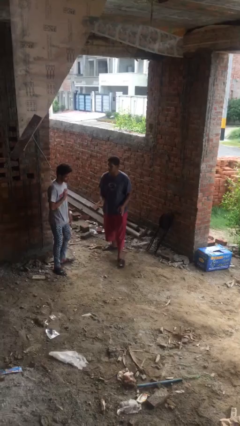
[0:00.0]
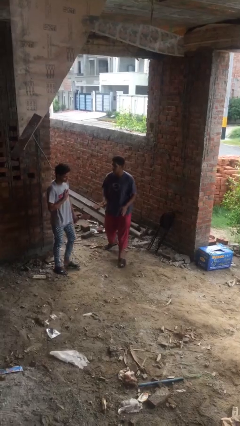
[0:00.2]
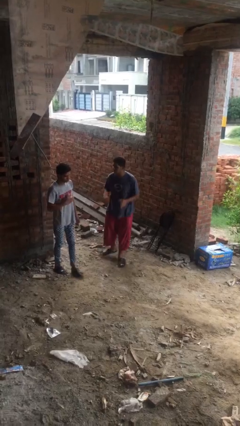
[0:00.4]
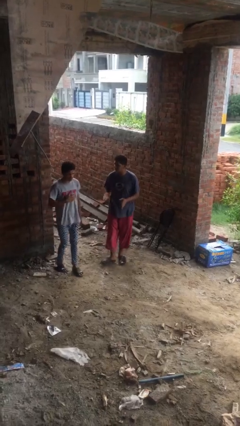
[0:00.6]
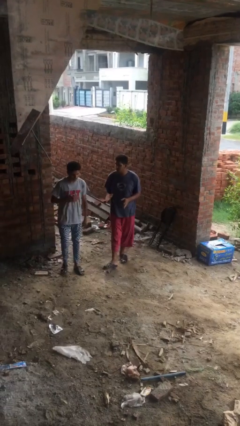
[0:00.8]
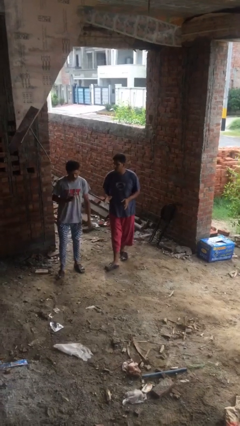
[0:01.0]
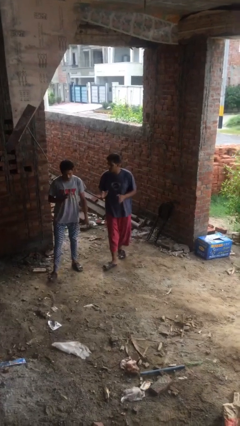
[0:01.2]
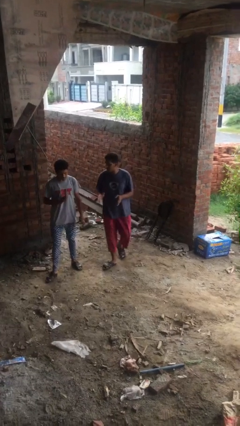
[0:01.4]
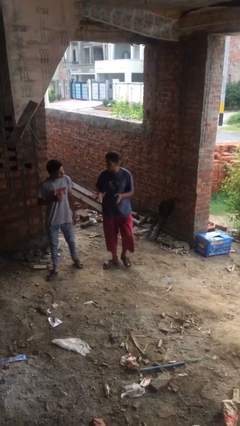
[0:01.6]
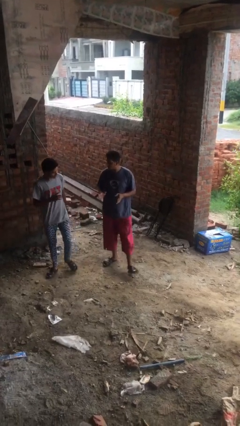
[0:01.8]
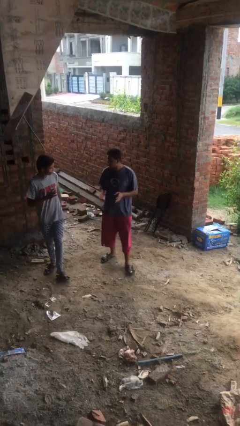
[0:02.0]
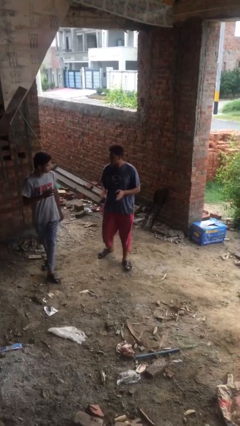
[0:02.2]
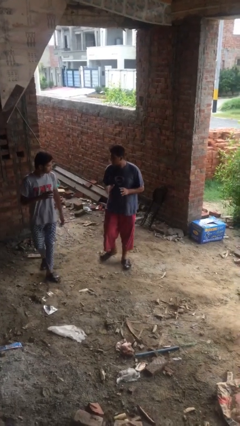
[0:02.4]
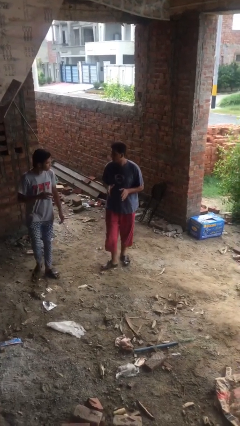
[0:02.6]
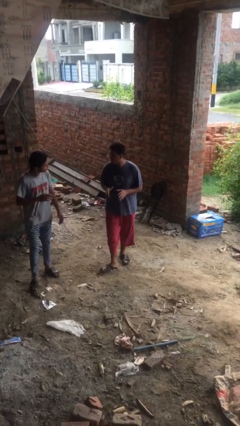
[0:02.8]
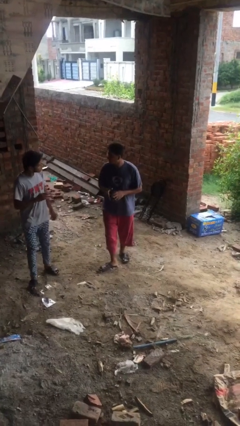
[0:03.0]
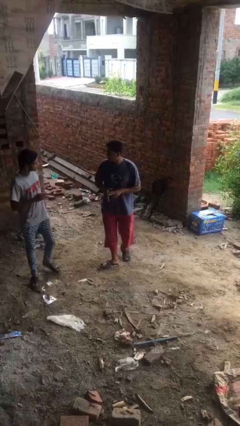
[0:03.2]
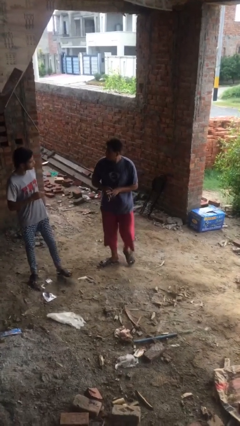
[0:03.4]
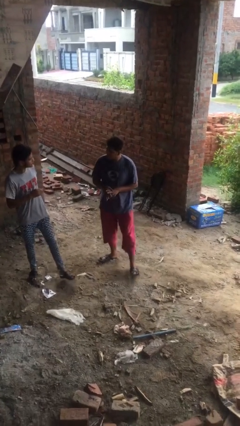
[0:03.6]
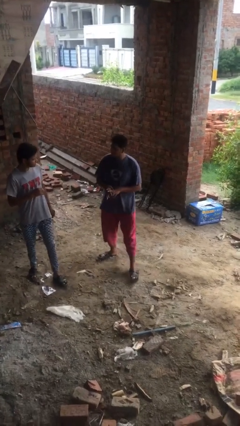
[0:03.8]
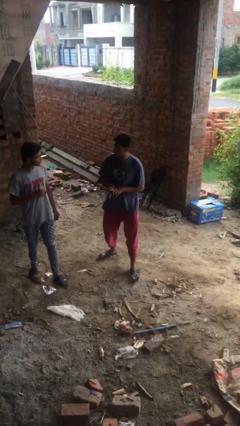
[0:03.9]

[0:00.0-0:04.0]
person talks to person

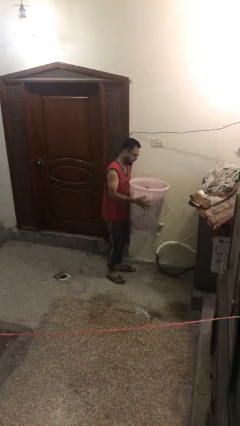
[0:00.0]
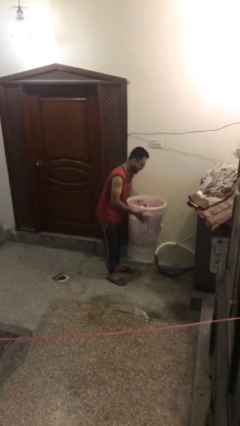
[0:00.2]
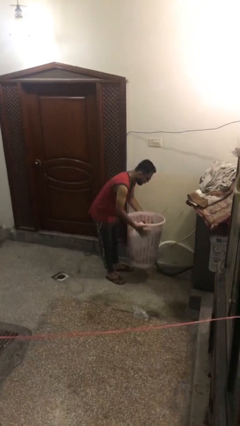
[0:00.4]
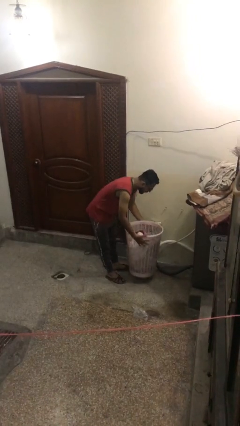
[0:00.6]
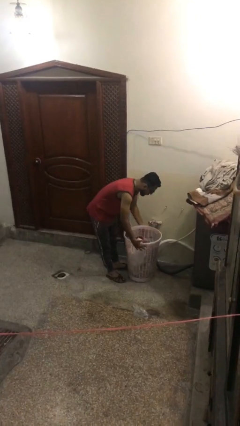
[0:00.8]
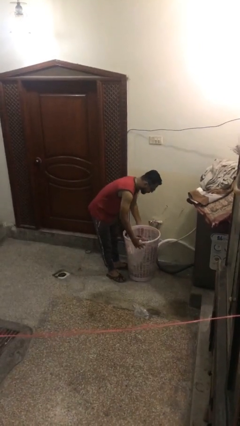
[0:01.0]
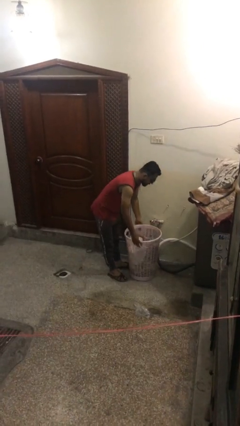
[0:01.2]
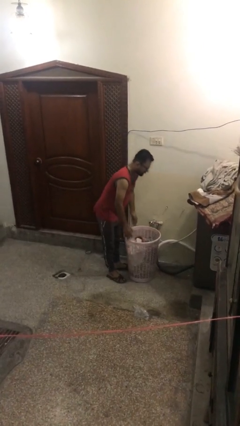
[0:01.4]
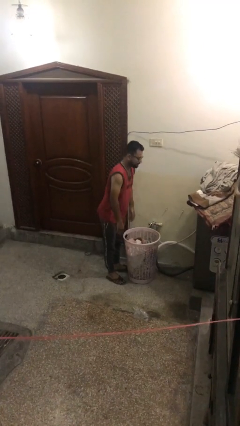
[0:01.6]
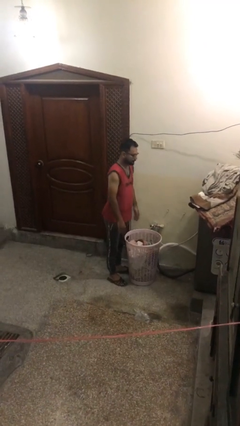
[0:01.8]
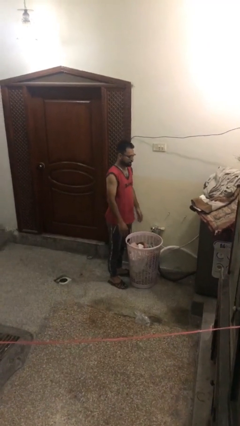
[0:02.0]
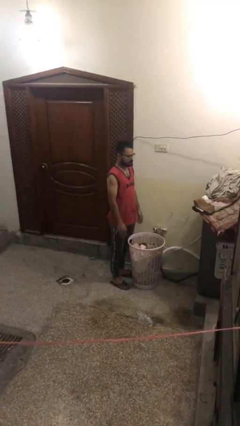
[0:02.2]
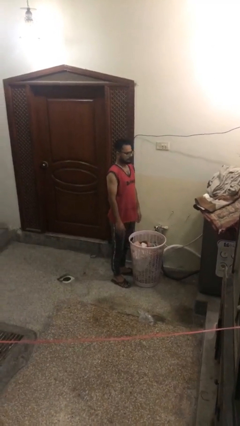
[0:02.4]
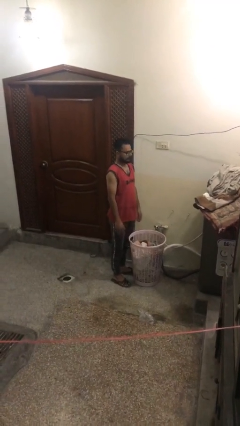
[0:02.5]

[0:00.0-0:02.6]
person puts down object on floor

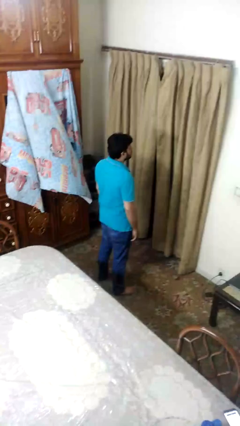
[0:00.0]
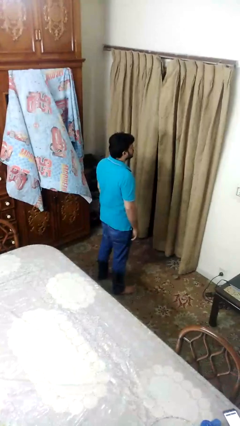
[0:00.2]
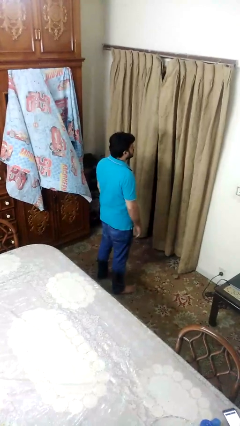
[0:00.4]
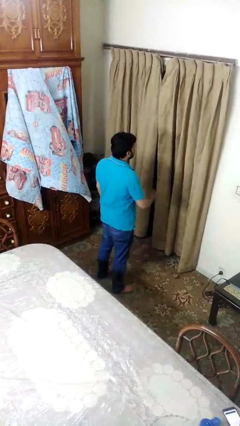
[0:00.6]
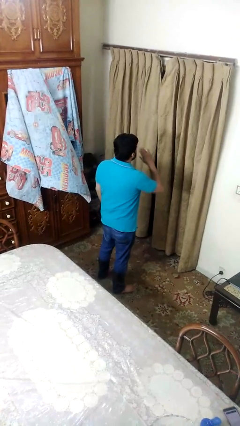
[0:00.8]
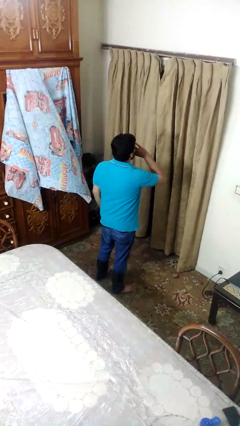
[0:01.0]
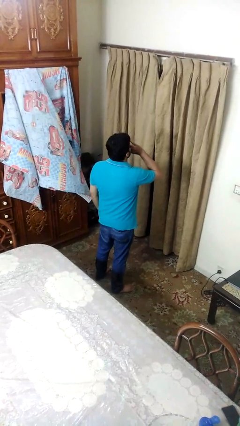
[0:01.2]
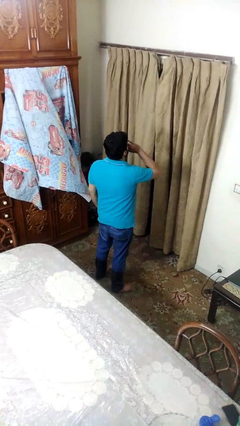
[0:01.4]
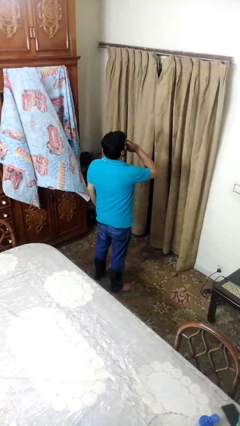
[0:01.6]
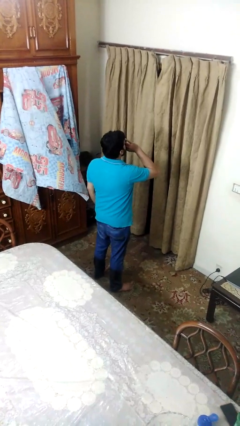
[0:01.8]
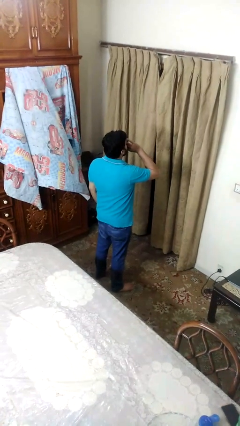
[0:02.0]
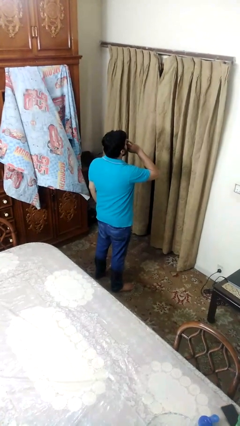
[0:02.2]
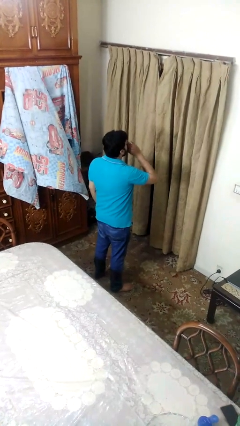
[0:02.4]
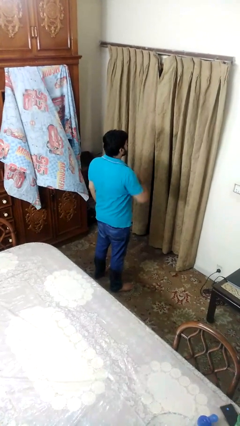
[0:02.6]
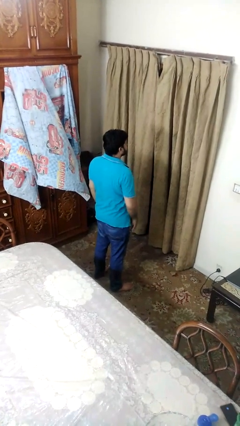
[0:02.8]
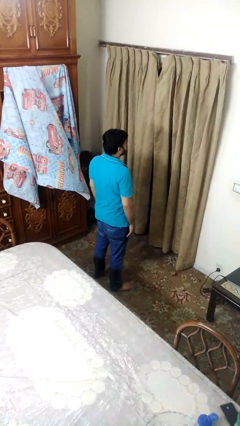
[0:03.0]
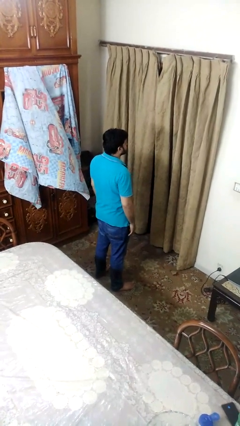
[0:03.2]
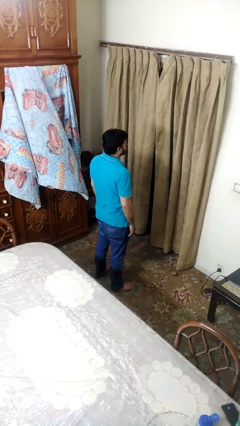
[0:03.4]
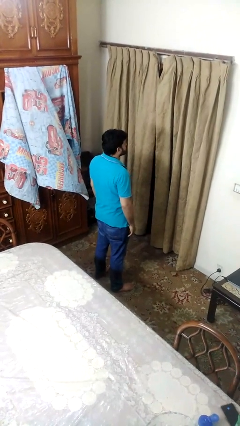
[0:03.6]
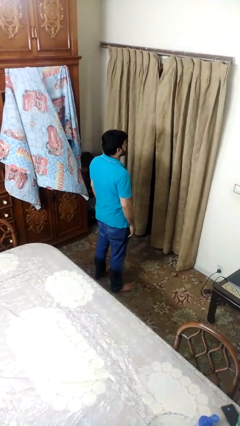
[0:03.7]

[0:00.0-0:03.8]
person yawns

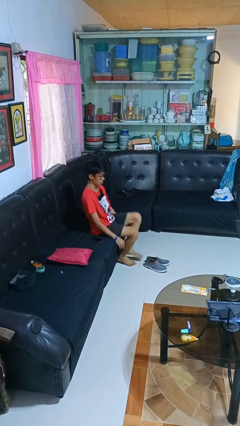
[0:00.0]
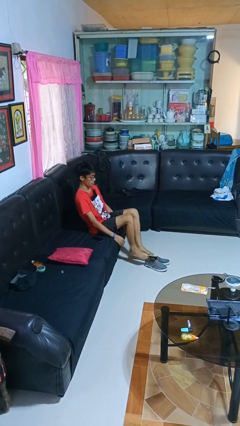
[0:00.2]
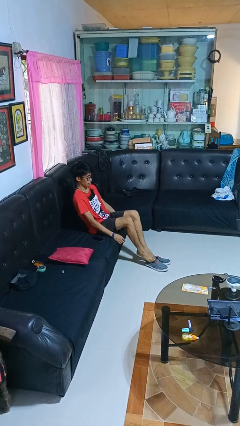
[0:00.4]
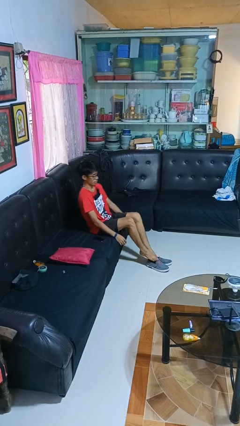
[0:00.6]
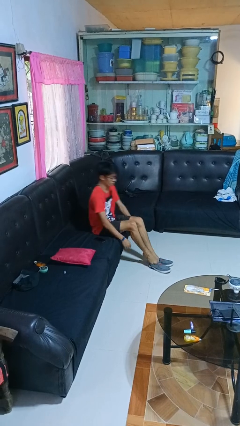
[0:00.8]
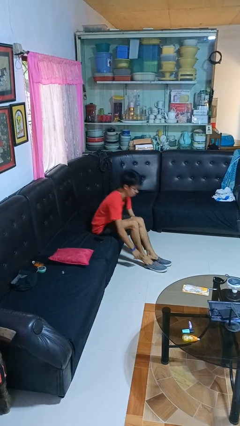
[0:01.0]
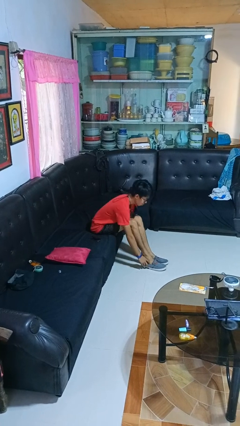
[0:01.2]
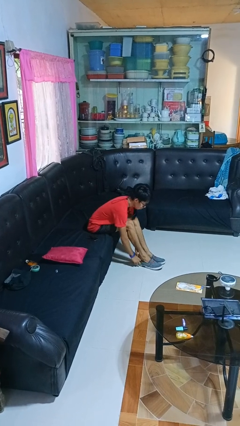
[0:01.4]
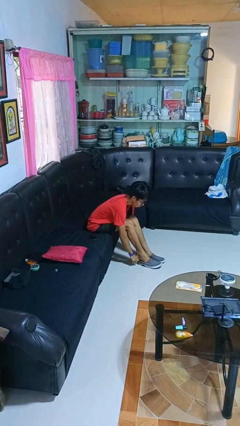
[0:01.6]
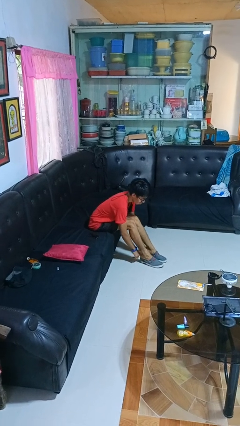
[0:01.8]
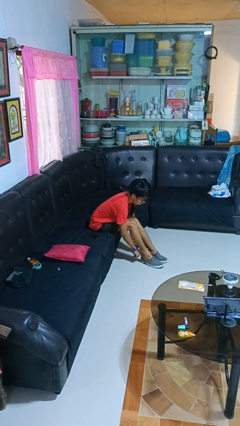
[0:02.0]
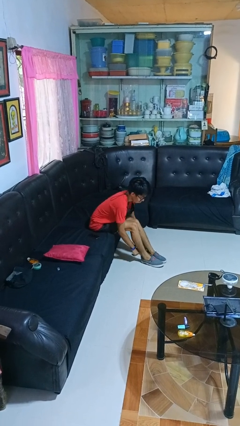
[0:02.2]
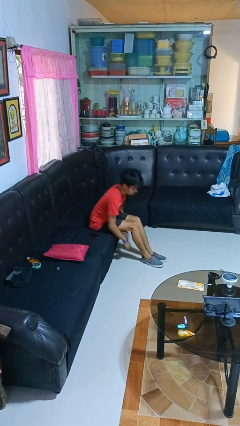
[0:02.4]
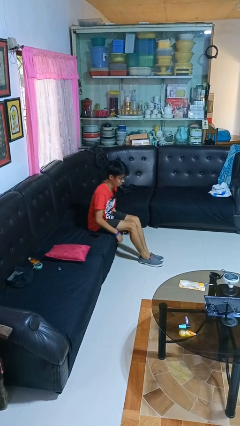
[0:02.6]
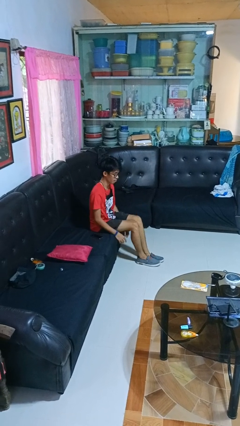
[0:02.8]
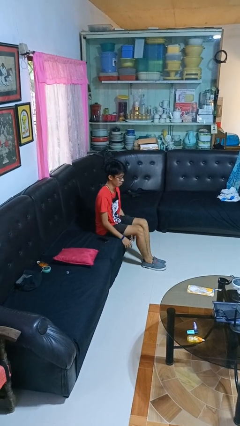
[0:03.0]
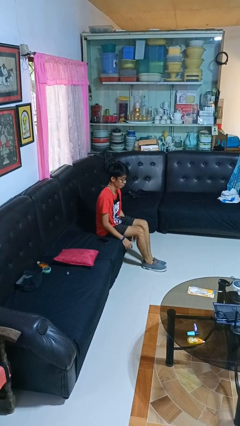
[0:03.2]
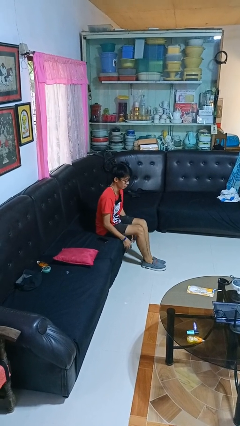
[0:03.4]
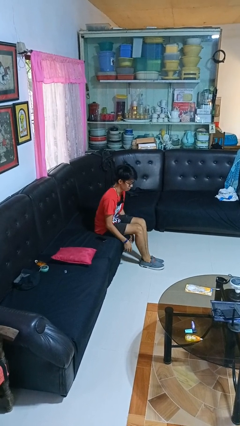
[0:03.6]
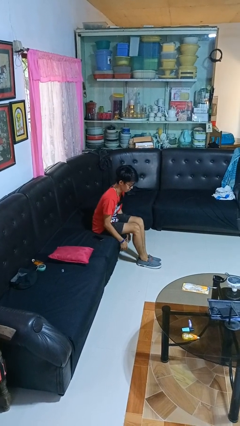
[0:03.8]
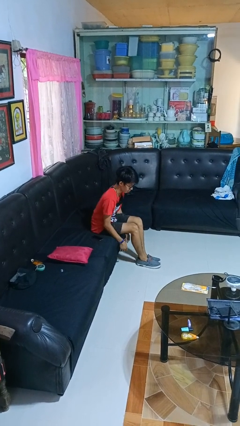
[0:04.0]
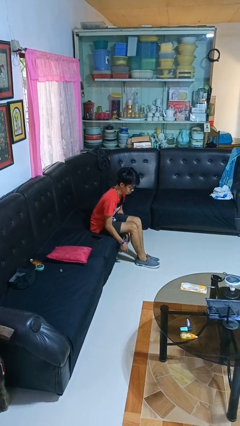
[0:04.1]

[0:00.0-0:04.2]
person puts on shoes

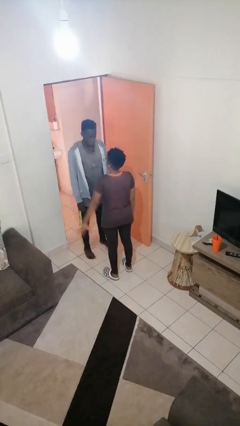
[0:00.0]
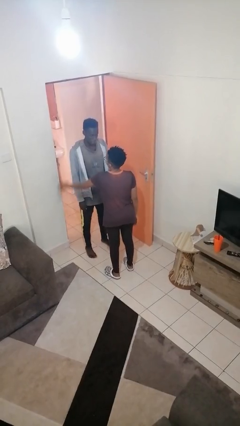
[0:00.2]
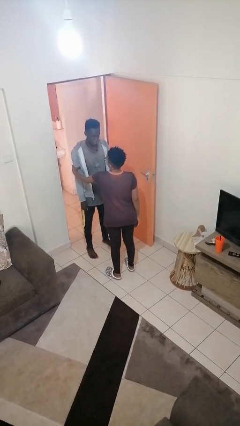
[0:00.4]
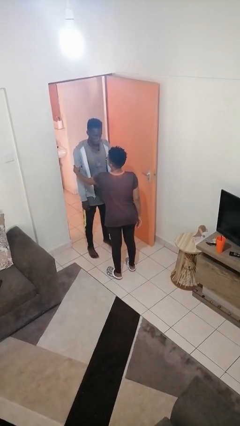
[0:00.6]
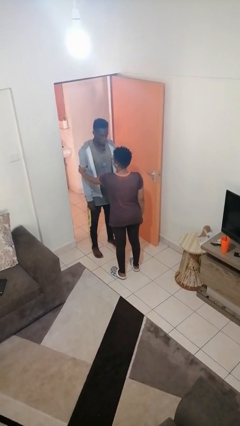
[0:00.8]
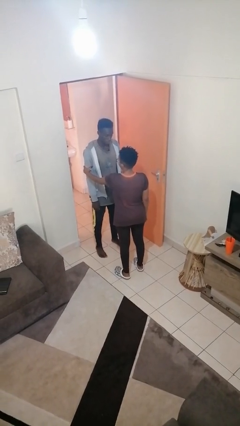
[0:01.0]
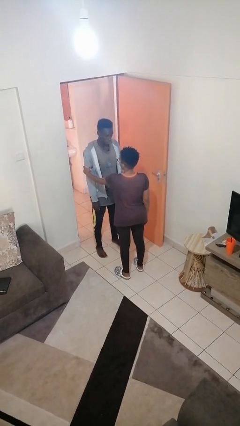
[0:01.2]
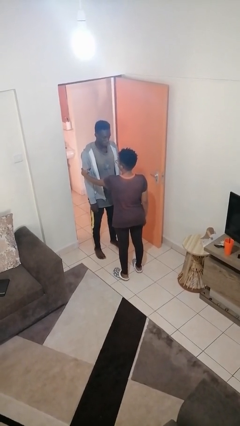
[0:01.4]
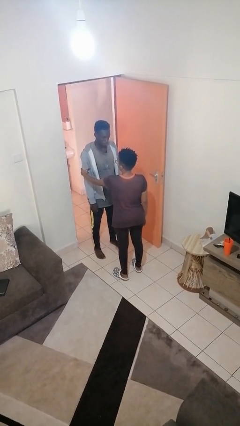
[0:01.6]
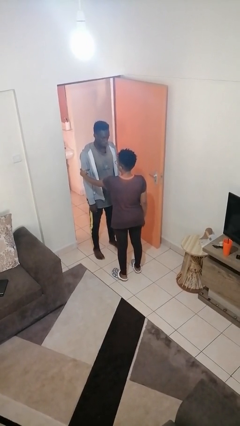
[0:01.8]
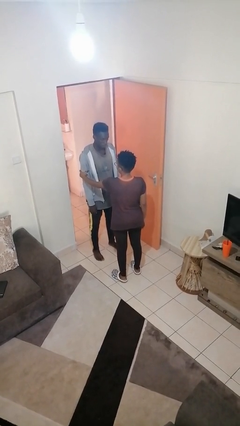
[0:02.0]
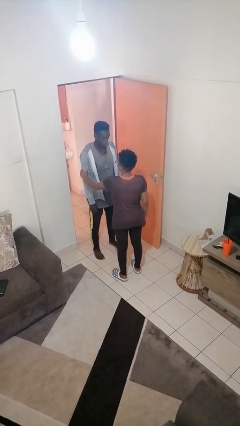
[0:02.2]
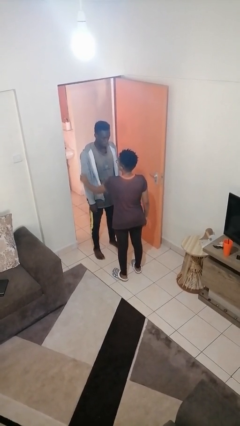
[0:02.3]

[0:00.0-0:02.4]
person grabs person by bicep

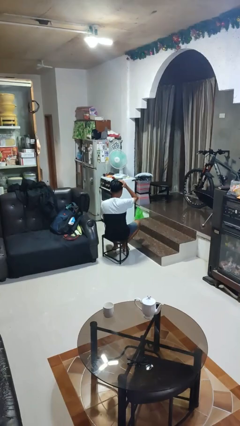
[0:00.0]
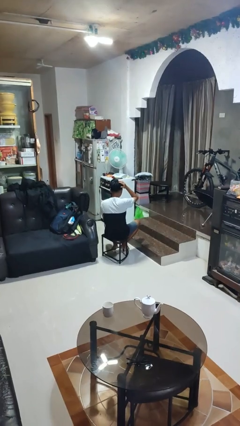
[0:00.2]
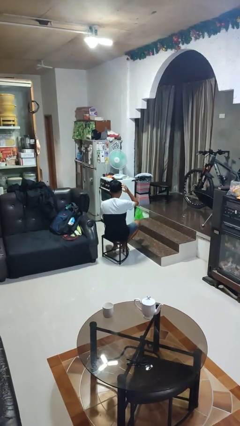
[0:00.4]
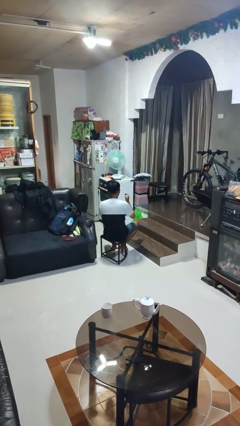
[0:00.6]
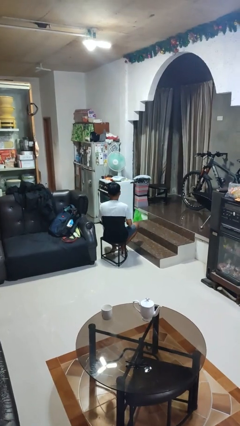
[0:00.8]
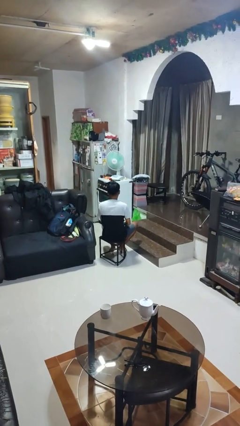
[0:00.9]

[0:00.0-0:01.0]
person pats head
